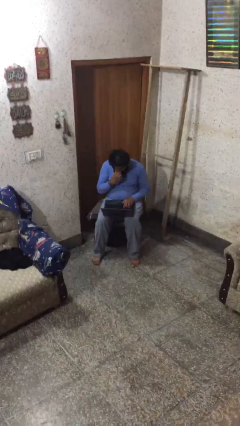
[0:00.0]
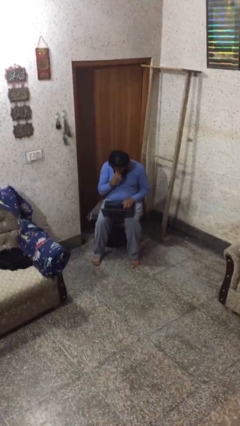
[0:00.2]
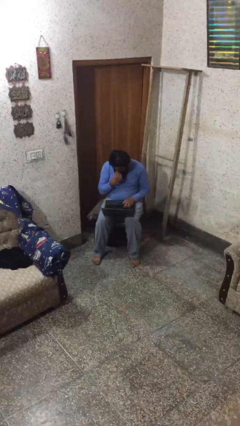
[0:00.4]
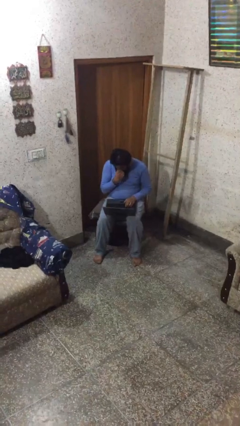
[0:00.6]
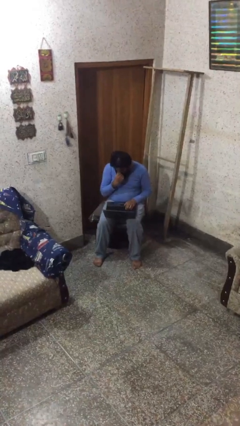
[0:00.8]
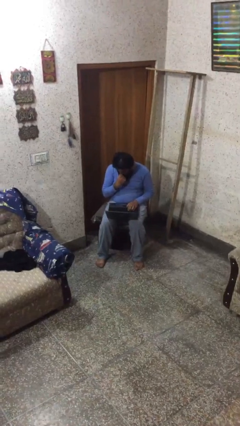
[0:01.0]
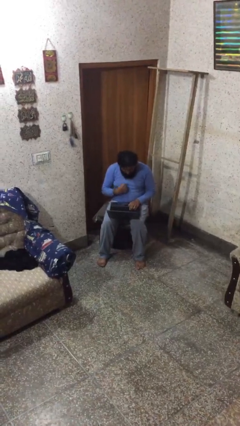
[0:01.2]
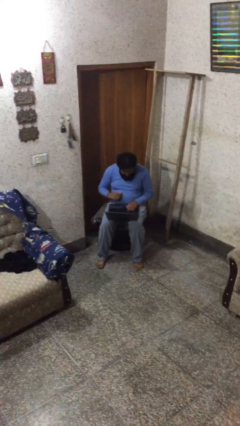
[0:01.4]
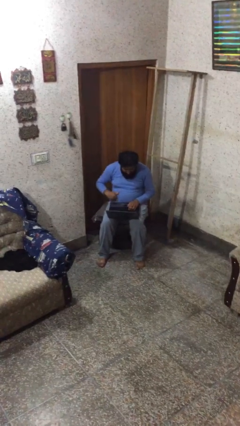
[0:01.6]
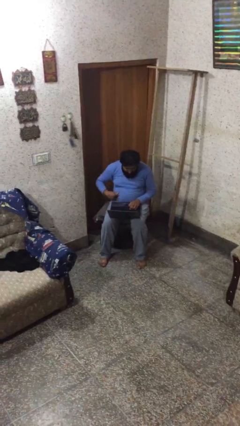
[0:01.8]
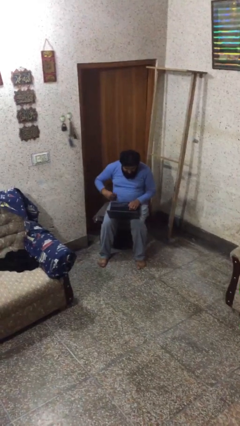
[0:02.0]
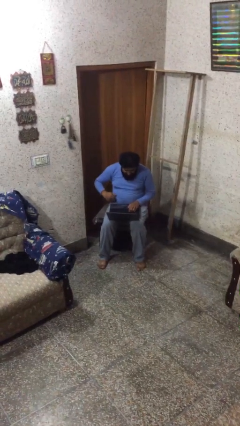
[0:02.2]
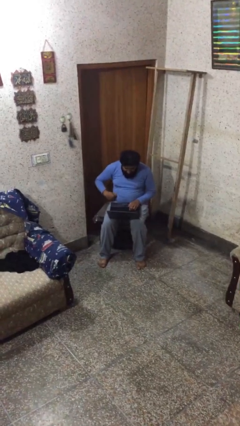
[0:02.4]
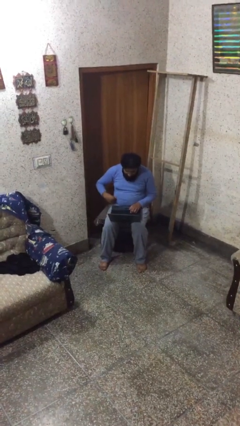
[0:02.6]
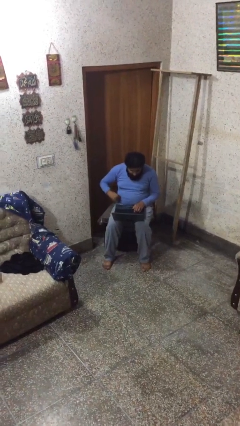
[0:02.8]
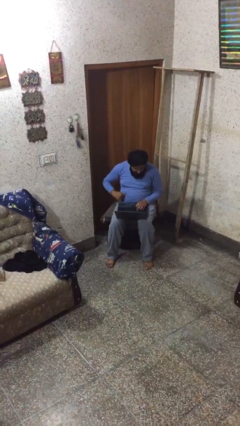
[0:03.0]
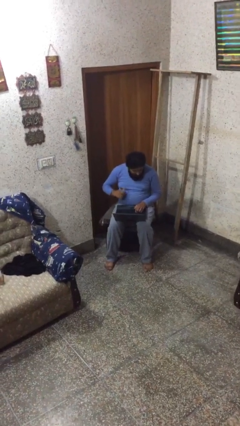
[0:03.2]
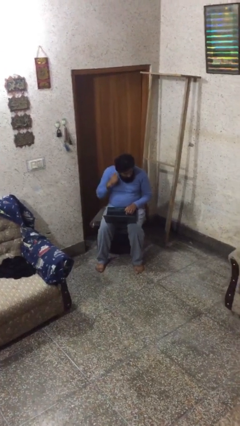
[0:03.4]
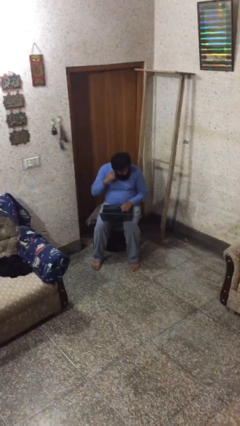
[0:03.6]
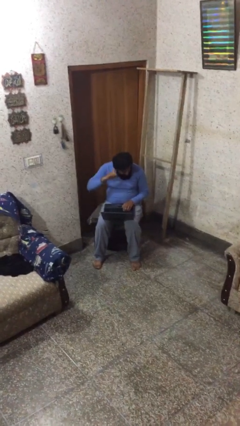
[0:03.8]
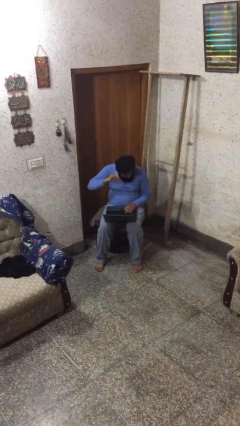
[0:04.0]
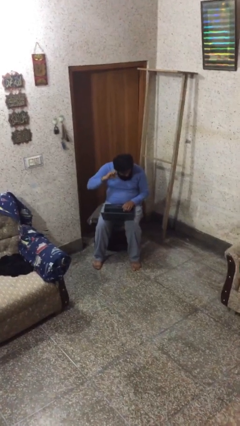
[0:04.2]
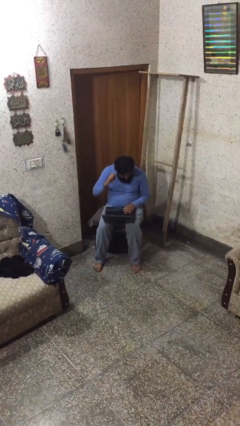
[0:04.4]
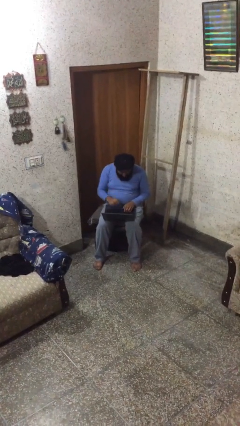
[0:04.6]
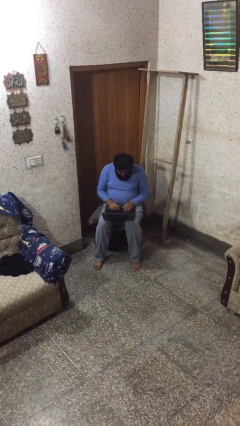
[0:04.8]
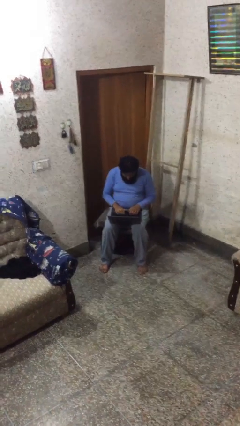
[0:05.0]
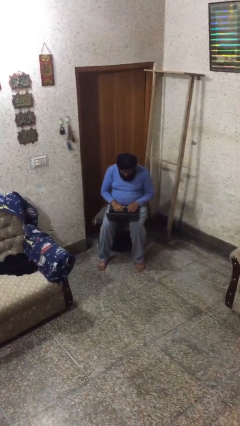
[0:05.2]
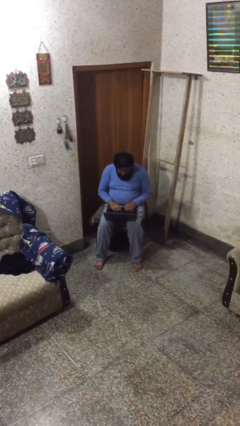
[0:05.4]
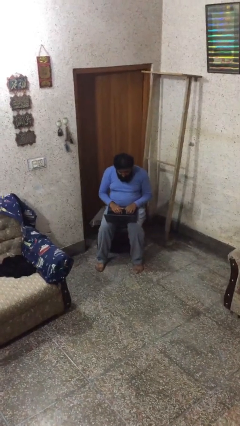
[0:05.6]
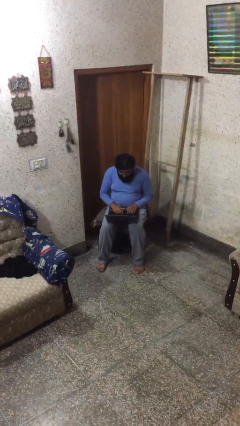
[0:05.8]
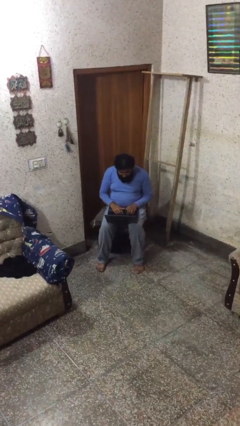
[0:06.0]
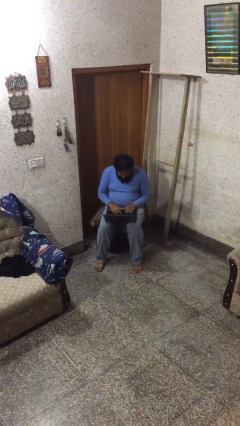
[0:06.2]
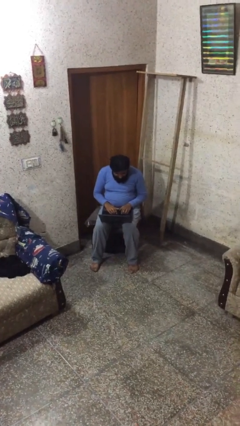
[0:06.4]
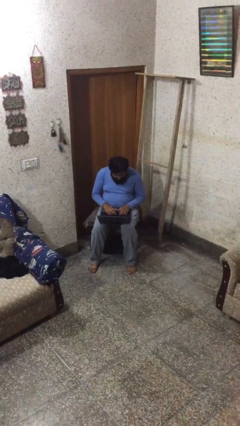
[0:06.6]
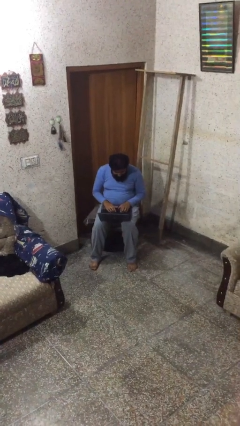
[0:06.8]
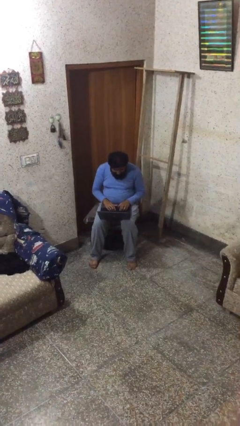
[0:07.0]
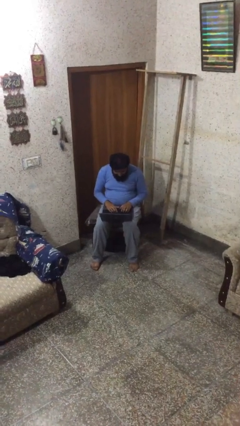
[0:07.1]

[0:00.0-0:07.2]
person interacts with laptop

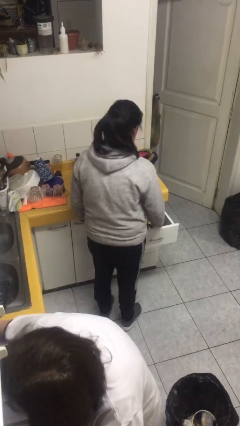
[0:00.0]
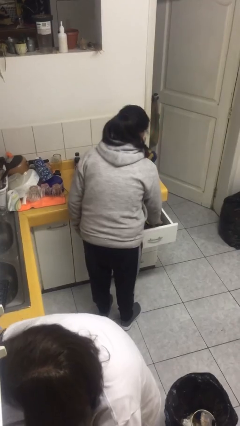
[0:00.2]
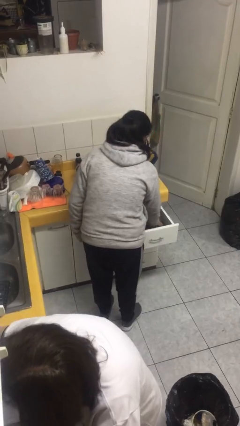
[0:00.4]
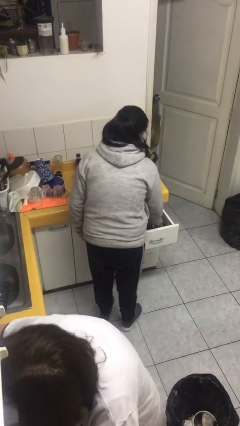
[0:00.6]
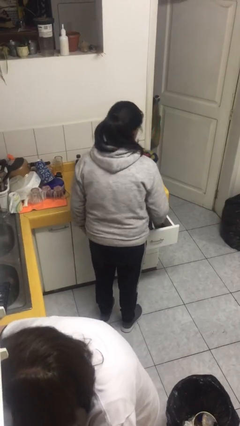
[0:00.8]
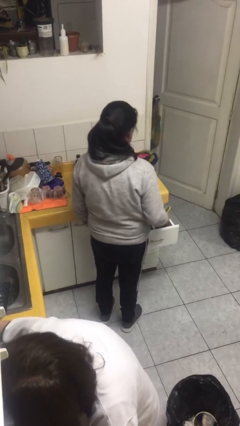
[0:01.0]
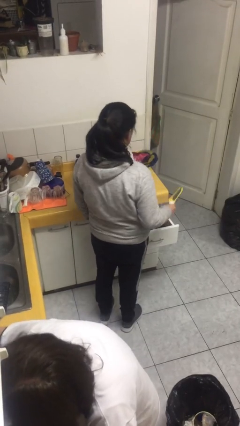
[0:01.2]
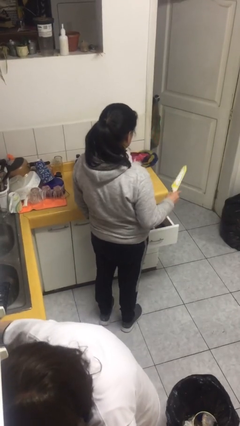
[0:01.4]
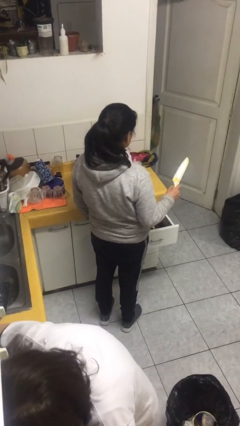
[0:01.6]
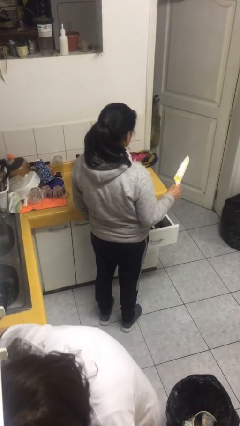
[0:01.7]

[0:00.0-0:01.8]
person takes object from kitchen drawer

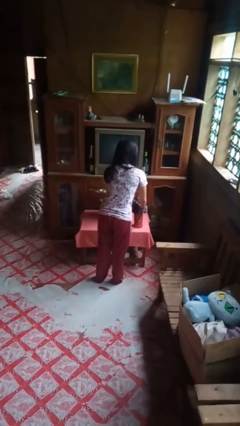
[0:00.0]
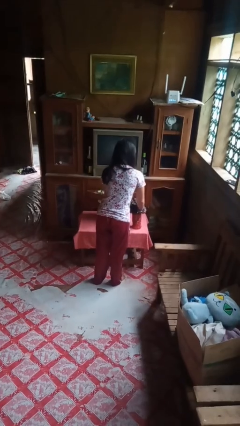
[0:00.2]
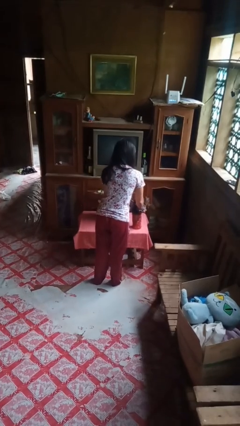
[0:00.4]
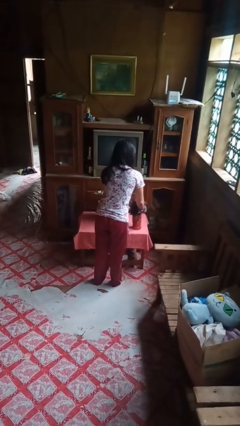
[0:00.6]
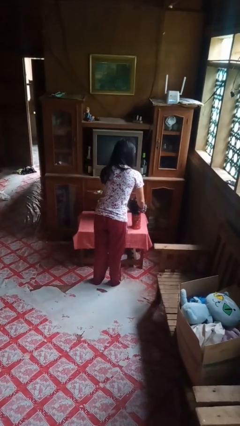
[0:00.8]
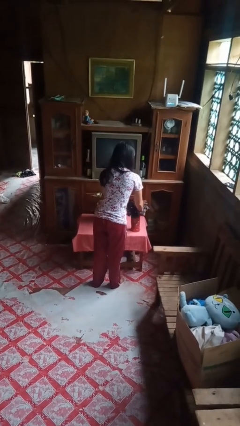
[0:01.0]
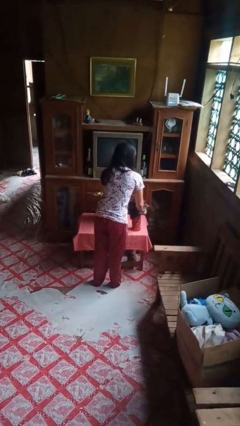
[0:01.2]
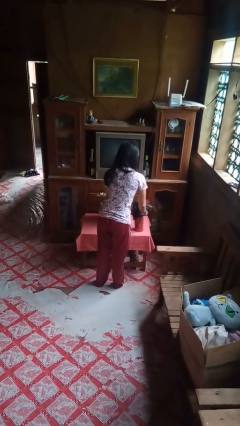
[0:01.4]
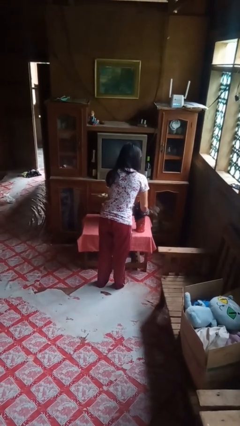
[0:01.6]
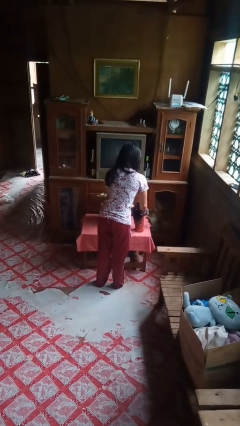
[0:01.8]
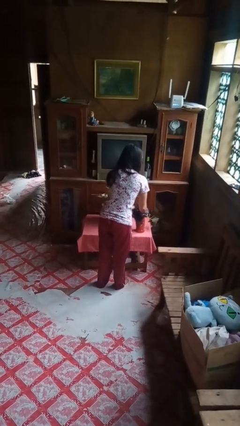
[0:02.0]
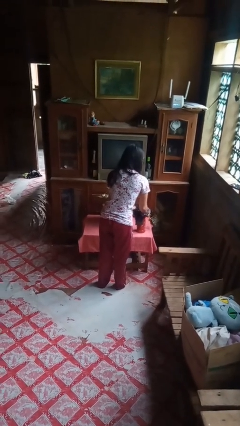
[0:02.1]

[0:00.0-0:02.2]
person arranges flowers in vase

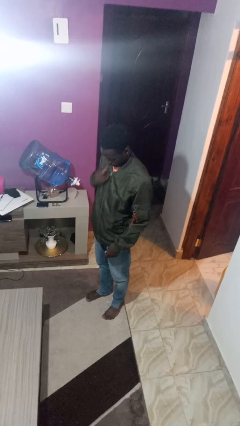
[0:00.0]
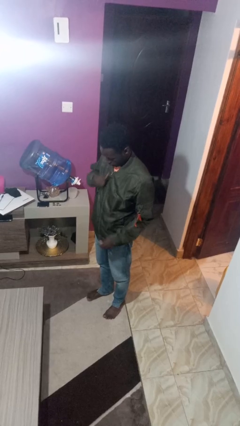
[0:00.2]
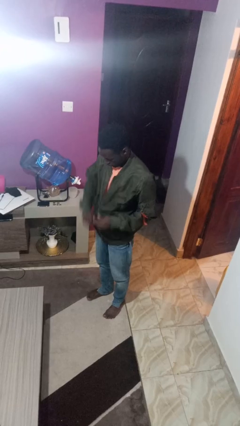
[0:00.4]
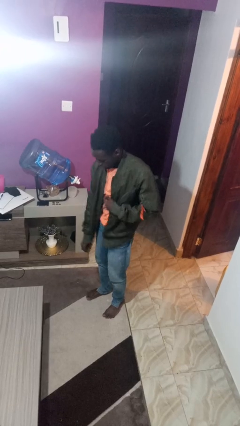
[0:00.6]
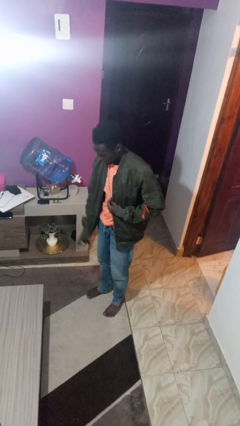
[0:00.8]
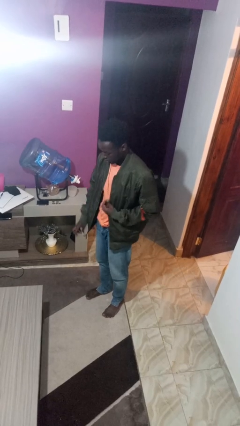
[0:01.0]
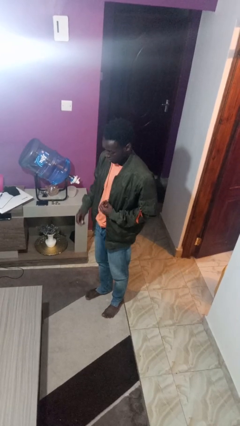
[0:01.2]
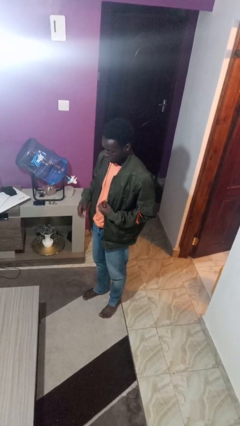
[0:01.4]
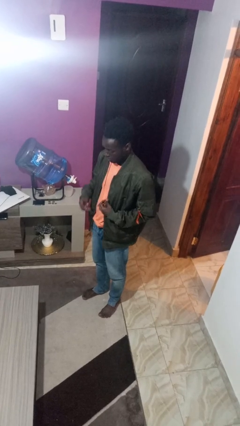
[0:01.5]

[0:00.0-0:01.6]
person unzips jacket

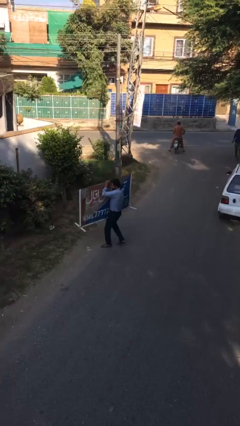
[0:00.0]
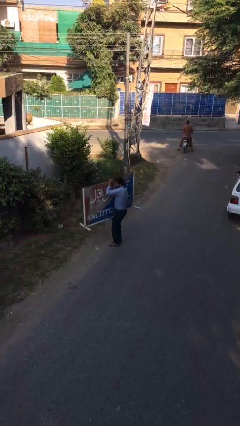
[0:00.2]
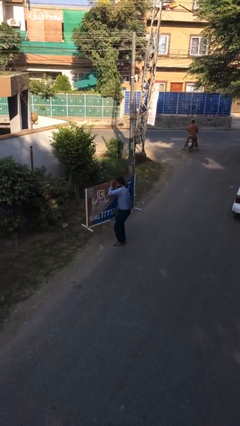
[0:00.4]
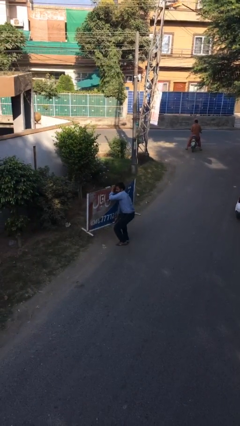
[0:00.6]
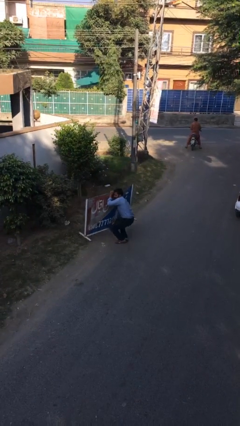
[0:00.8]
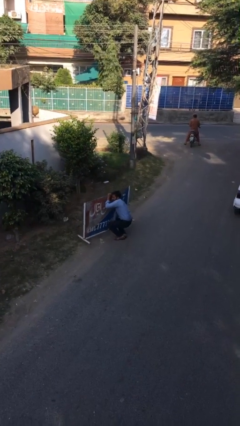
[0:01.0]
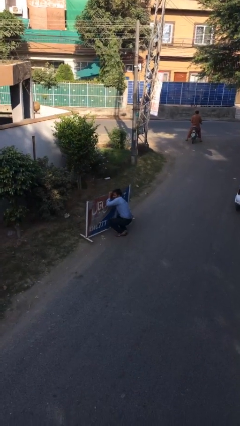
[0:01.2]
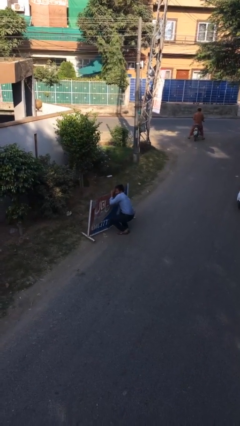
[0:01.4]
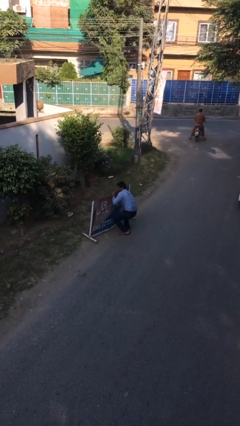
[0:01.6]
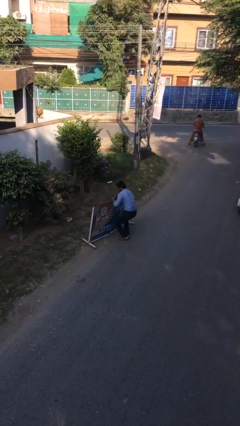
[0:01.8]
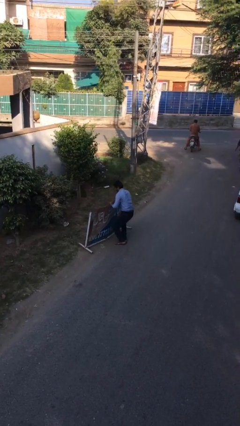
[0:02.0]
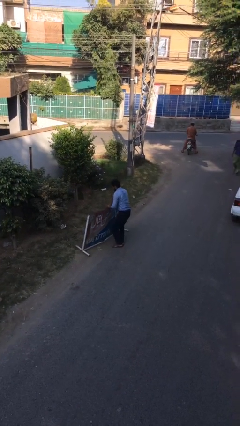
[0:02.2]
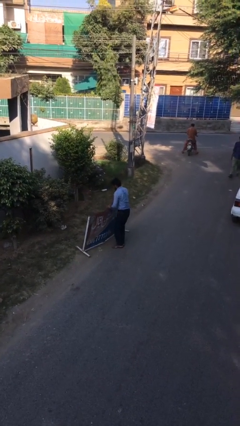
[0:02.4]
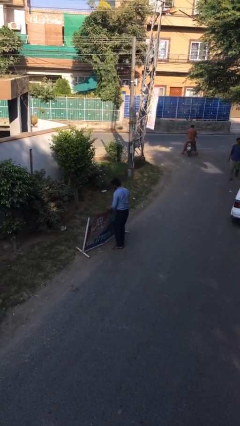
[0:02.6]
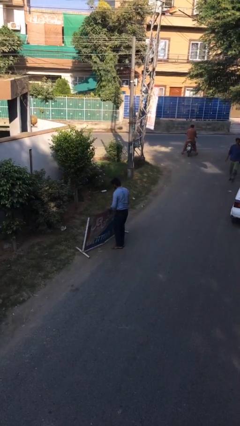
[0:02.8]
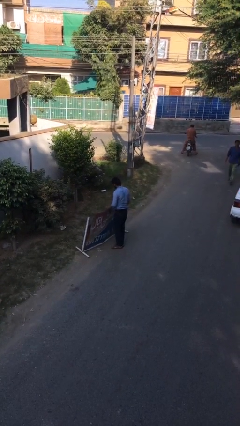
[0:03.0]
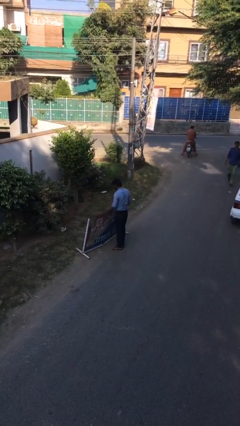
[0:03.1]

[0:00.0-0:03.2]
person puts down object on floor

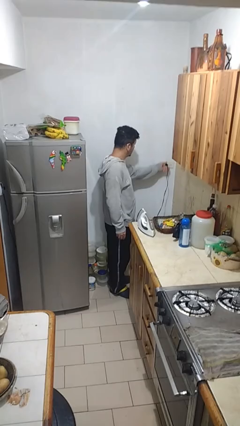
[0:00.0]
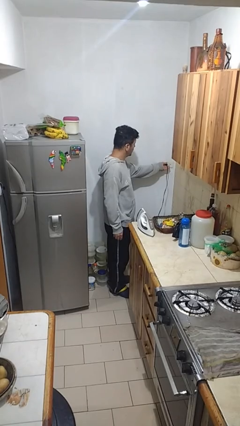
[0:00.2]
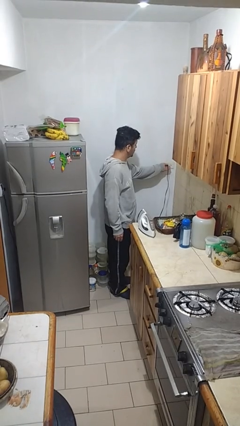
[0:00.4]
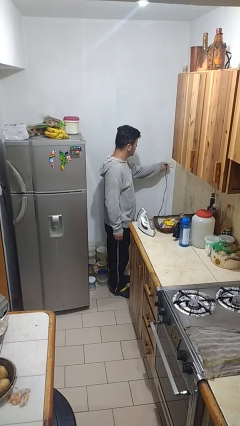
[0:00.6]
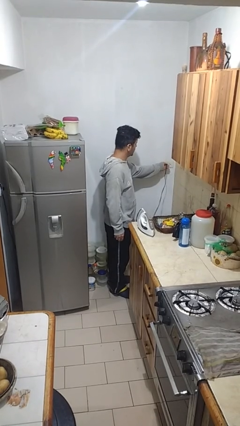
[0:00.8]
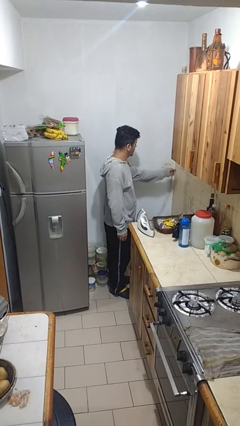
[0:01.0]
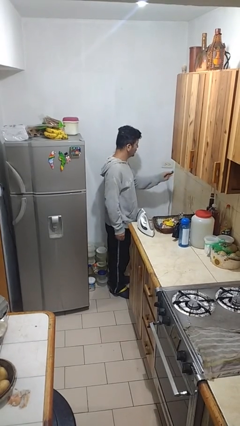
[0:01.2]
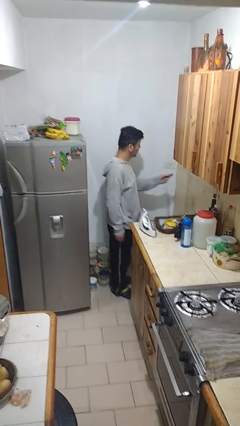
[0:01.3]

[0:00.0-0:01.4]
person unplugs from electrical socket
